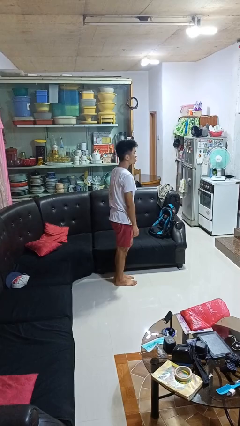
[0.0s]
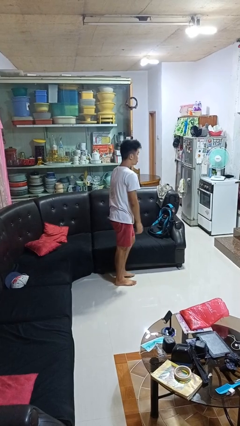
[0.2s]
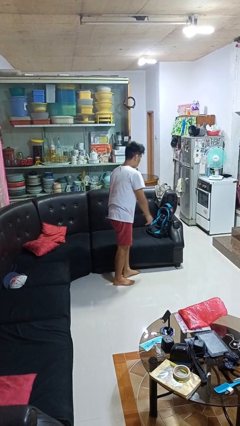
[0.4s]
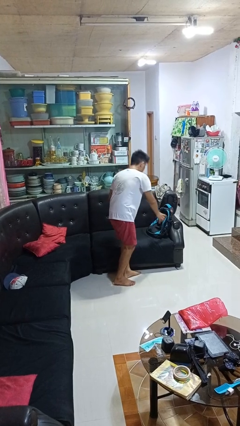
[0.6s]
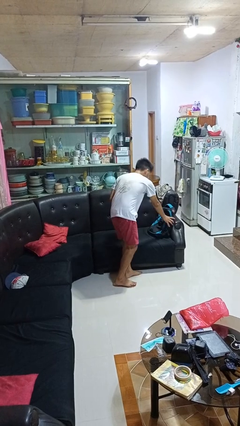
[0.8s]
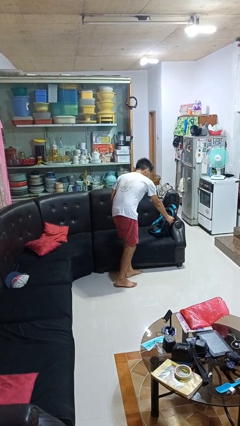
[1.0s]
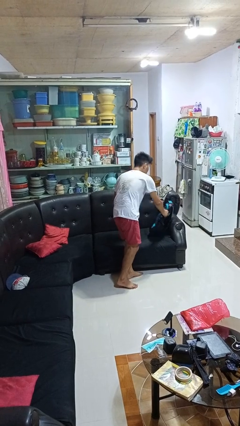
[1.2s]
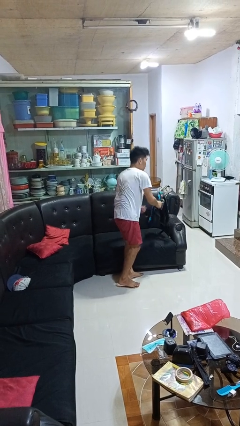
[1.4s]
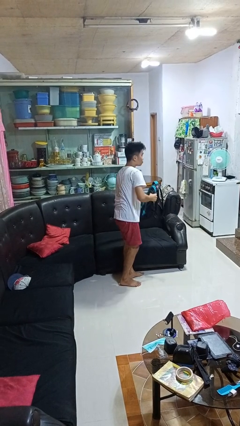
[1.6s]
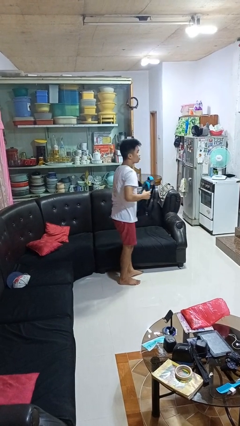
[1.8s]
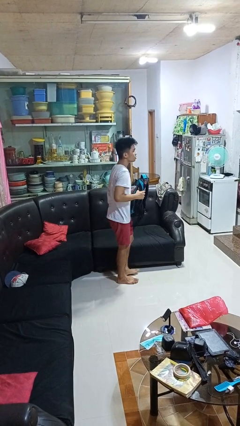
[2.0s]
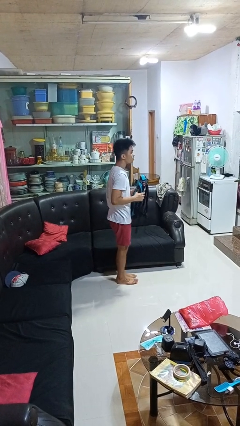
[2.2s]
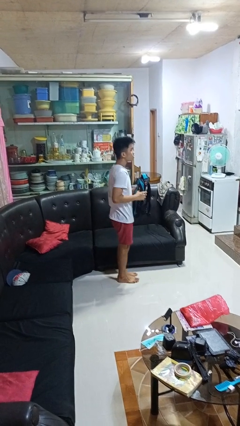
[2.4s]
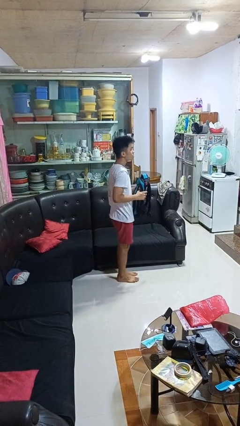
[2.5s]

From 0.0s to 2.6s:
person picks up object from couch

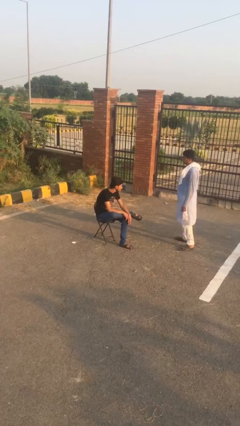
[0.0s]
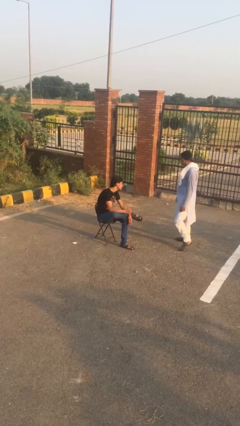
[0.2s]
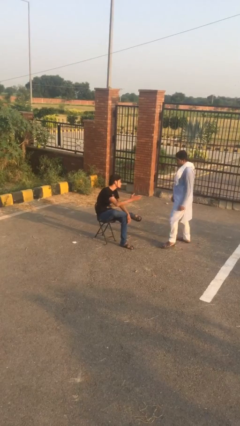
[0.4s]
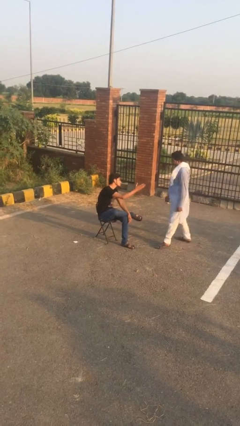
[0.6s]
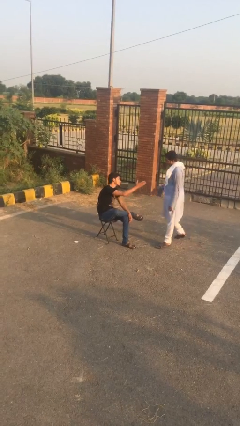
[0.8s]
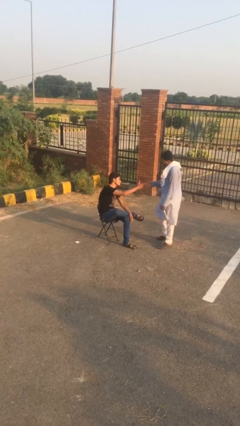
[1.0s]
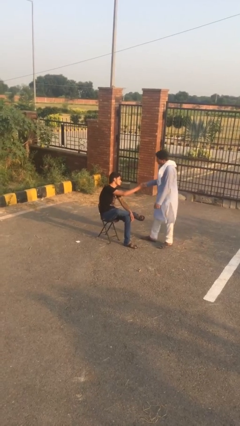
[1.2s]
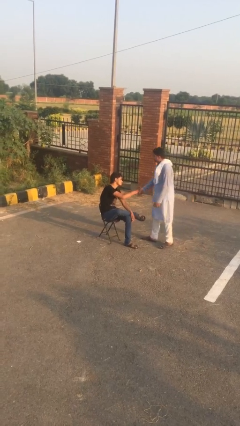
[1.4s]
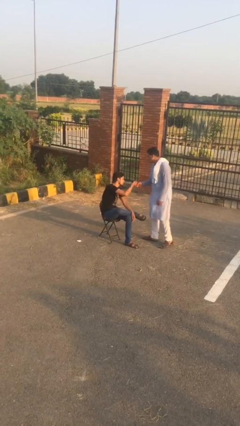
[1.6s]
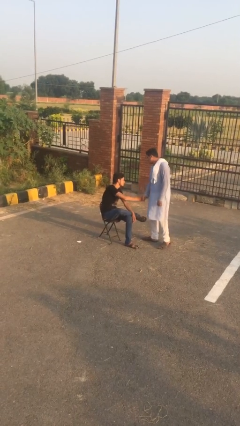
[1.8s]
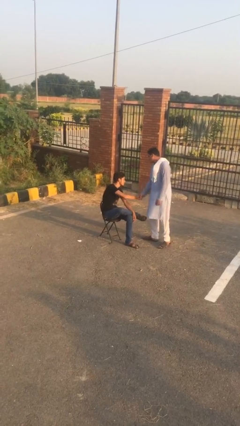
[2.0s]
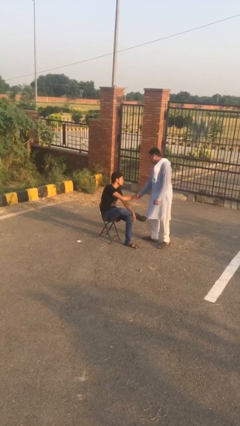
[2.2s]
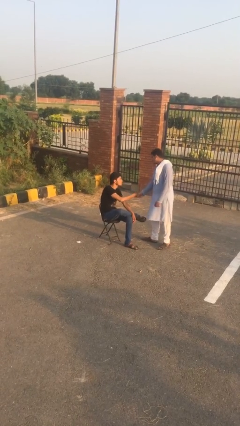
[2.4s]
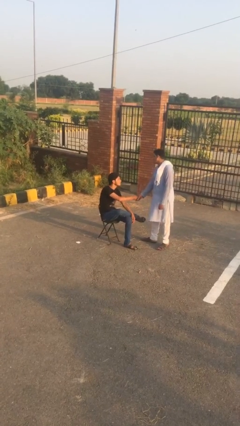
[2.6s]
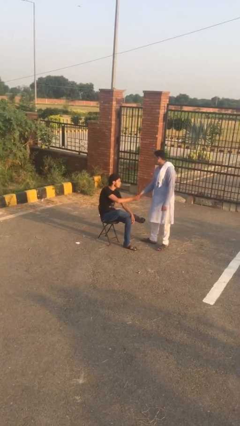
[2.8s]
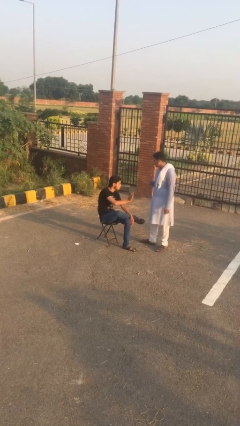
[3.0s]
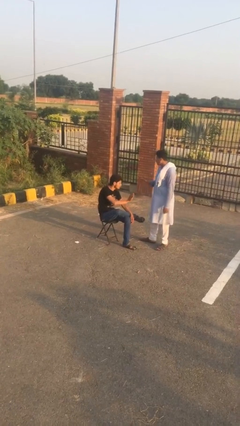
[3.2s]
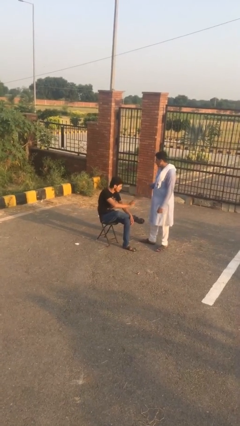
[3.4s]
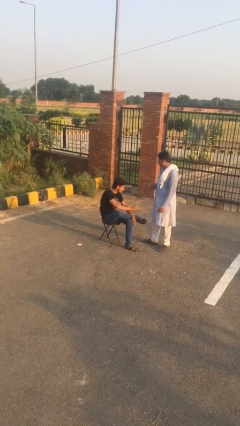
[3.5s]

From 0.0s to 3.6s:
person shakes hand

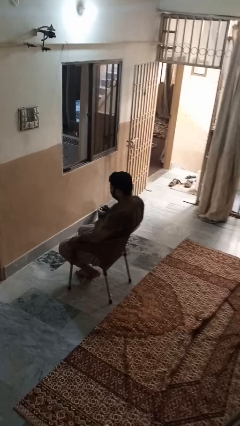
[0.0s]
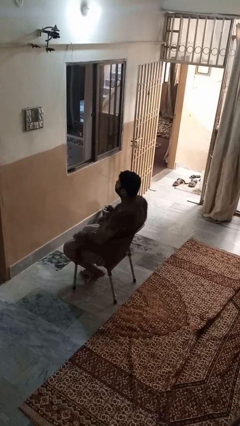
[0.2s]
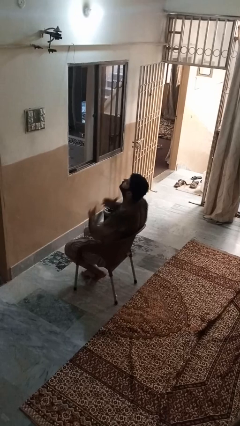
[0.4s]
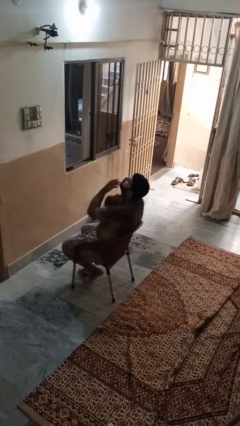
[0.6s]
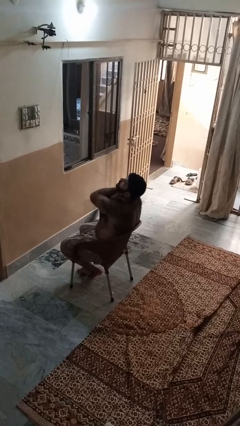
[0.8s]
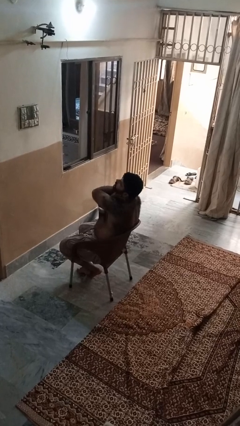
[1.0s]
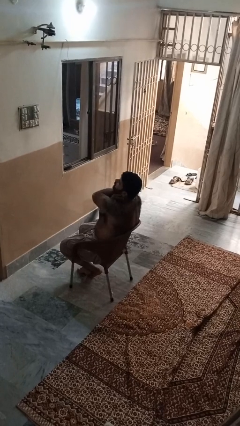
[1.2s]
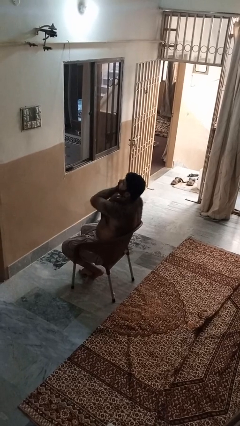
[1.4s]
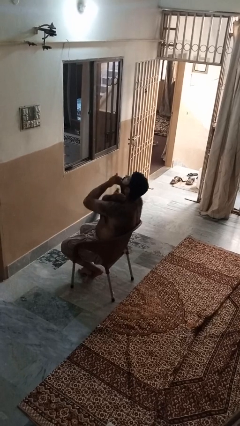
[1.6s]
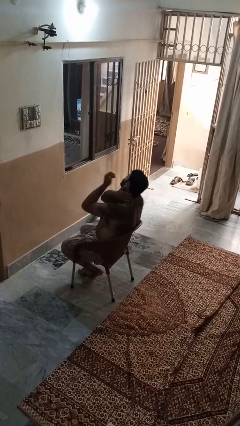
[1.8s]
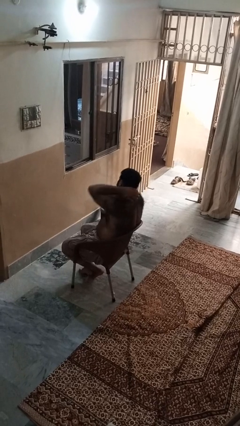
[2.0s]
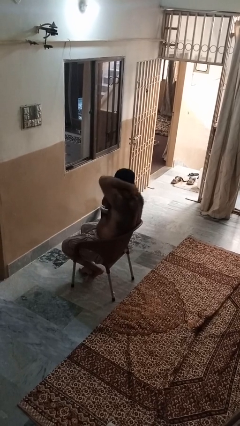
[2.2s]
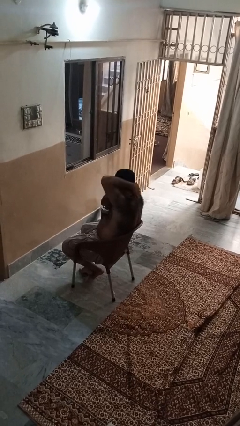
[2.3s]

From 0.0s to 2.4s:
person rubs neck

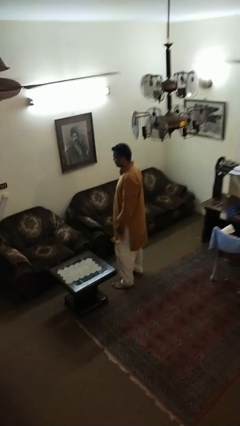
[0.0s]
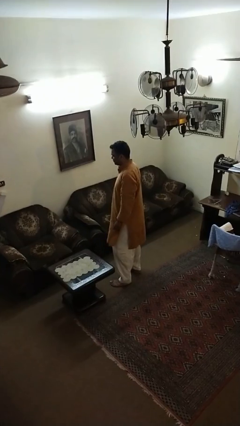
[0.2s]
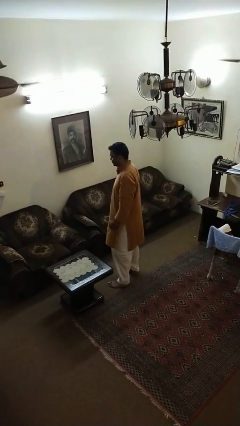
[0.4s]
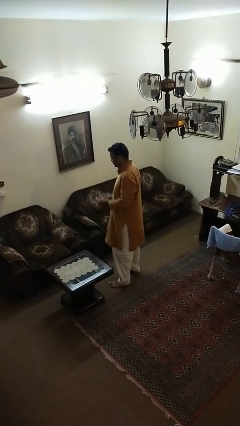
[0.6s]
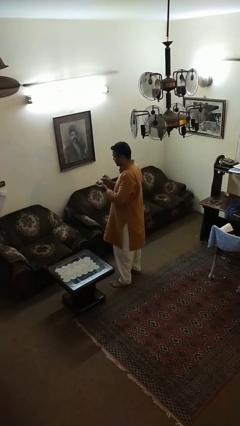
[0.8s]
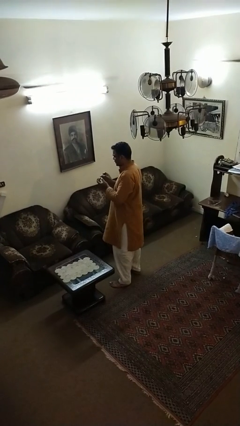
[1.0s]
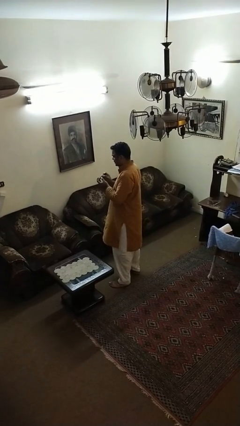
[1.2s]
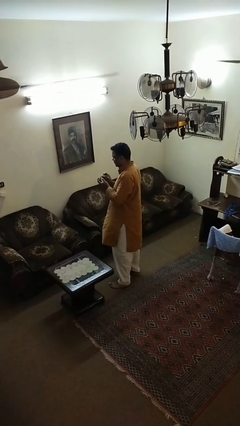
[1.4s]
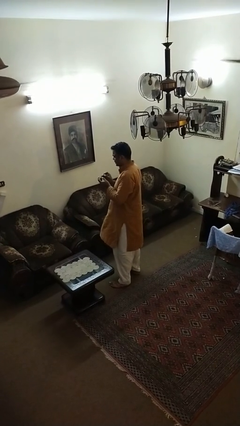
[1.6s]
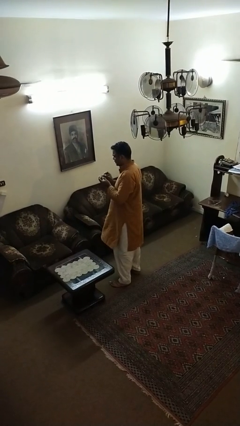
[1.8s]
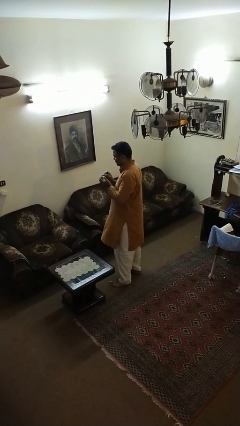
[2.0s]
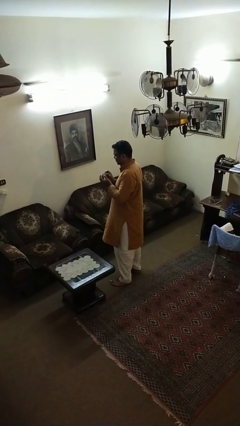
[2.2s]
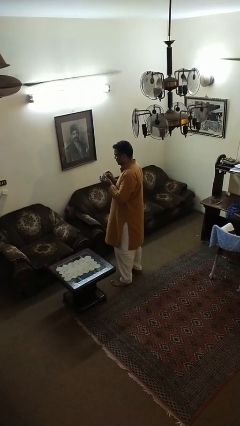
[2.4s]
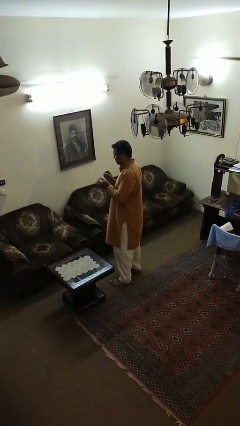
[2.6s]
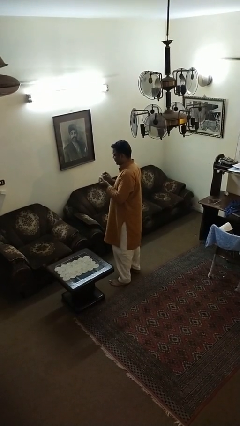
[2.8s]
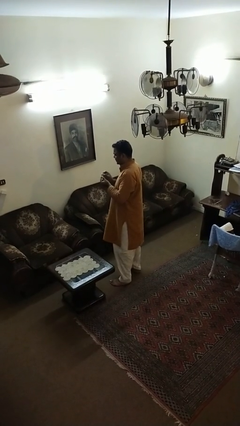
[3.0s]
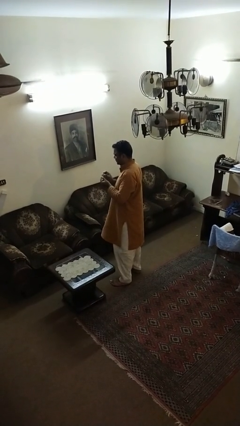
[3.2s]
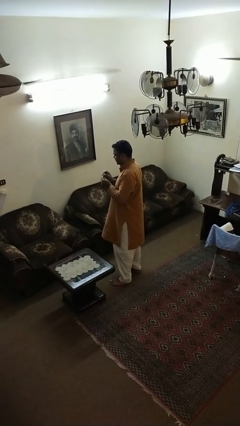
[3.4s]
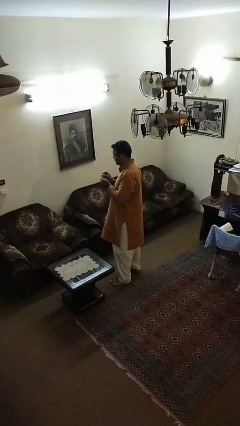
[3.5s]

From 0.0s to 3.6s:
person clips fingernails

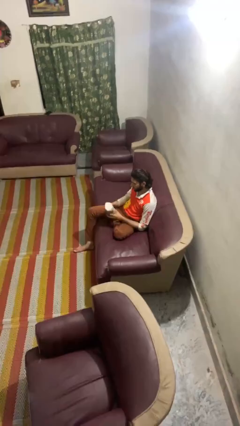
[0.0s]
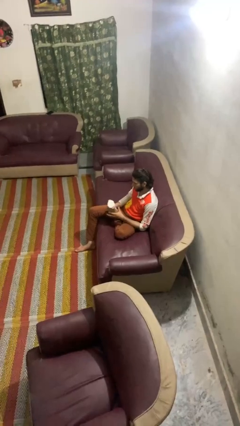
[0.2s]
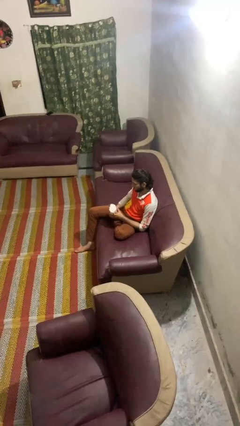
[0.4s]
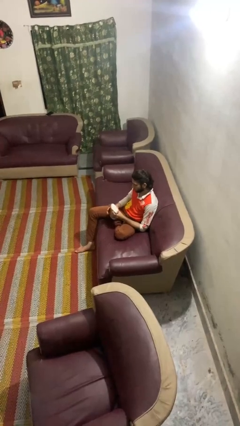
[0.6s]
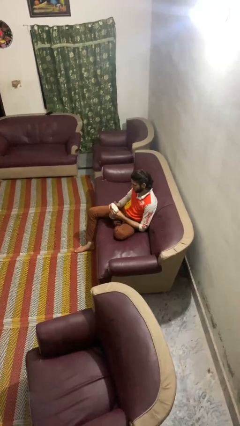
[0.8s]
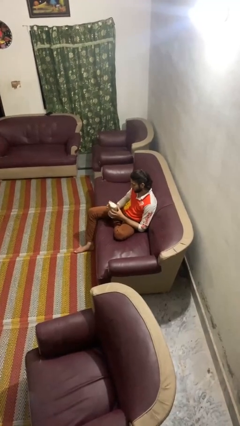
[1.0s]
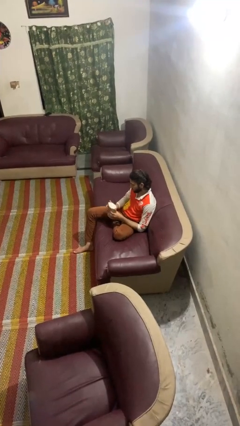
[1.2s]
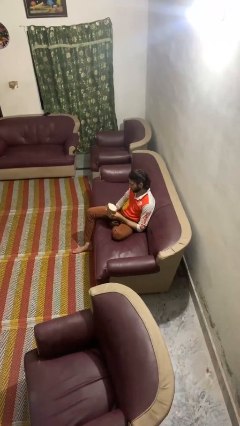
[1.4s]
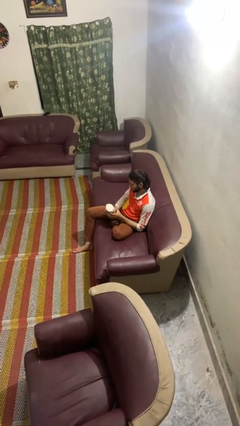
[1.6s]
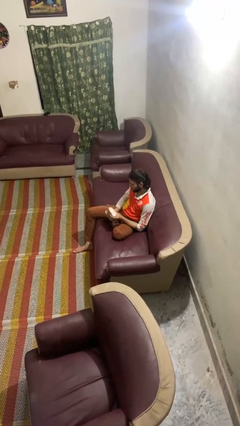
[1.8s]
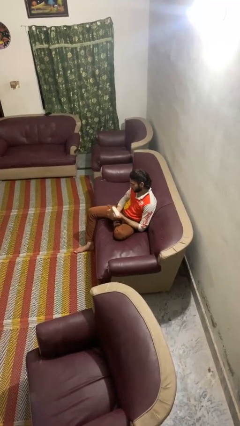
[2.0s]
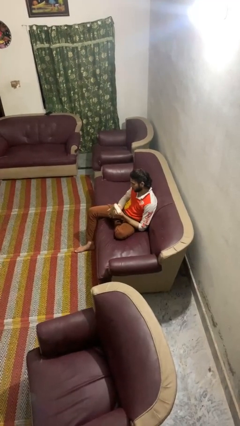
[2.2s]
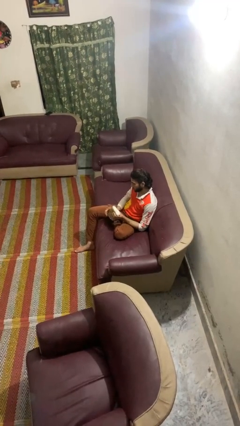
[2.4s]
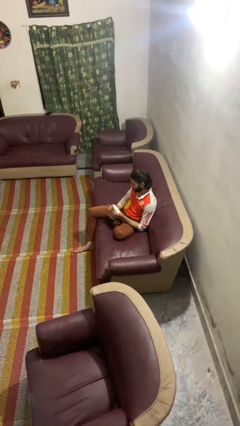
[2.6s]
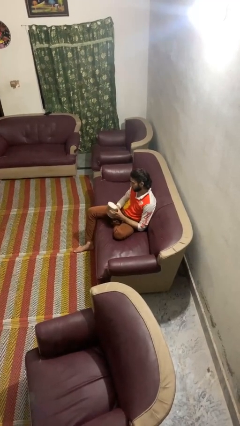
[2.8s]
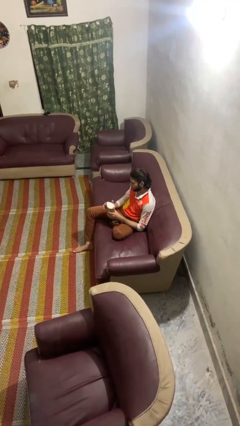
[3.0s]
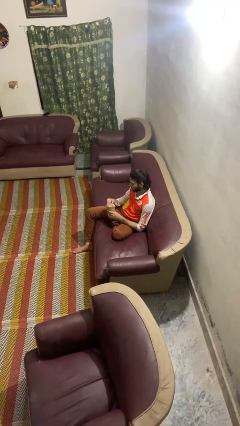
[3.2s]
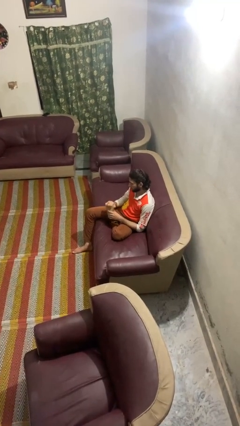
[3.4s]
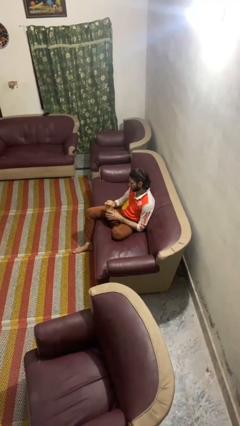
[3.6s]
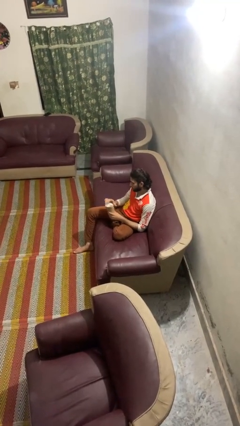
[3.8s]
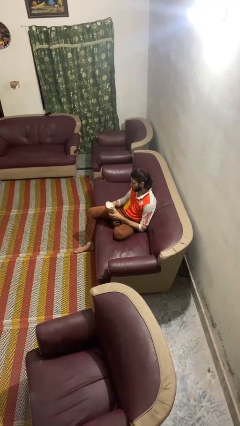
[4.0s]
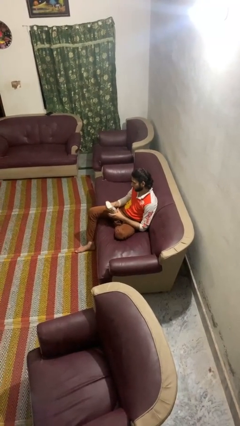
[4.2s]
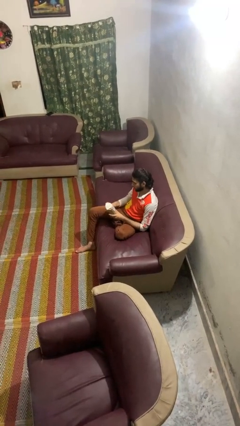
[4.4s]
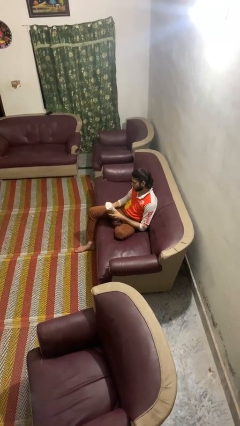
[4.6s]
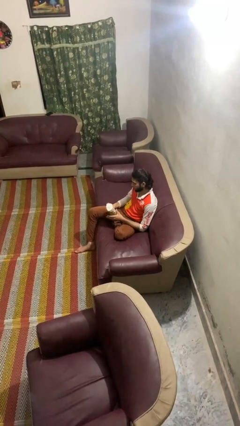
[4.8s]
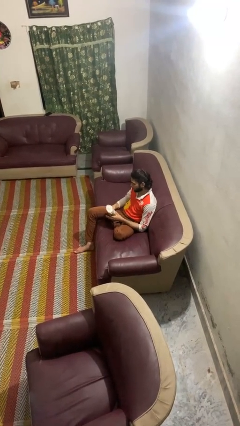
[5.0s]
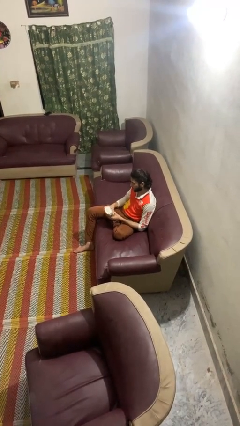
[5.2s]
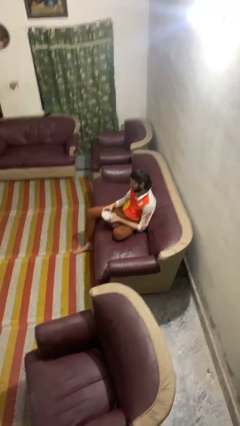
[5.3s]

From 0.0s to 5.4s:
person squeezes object
